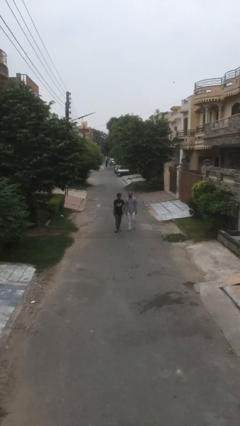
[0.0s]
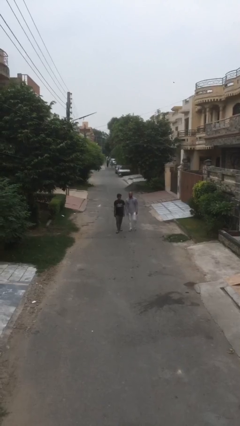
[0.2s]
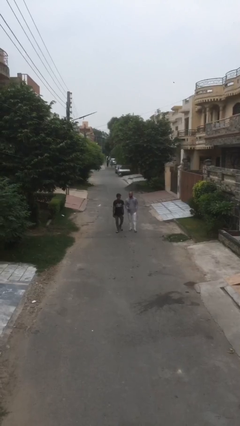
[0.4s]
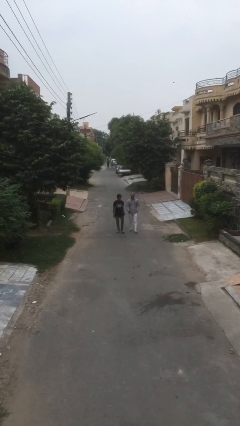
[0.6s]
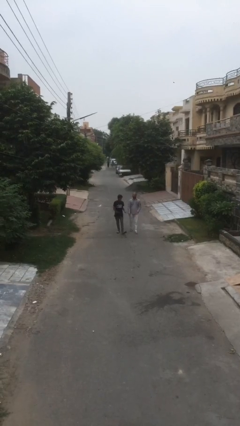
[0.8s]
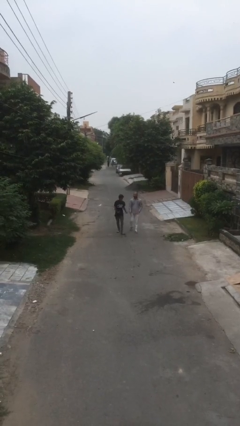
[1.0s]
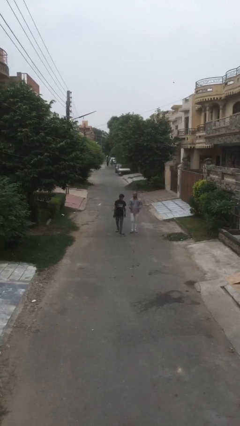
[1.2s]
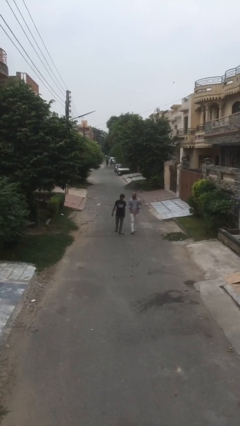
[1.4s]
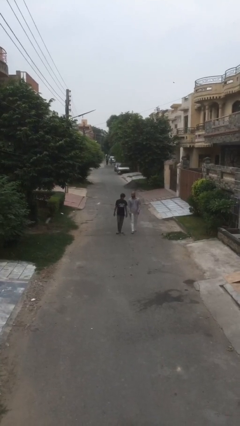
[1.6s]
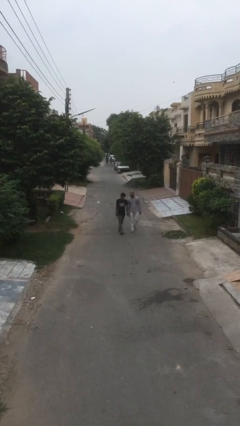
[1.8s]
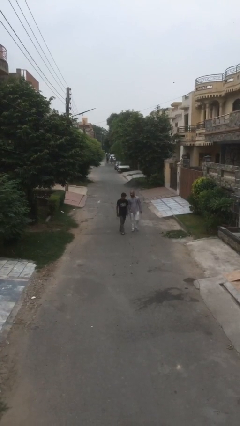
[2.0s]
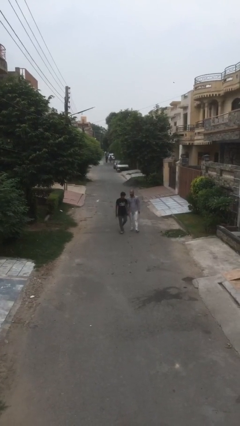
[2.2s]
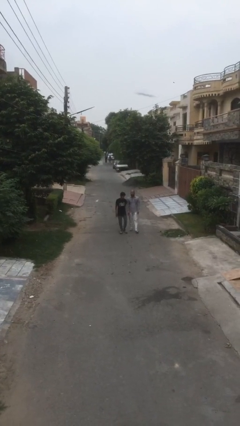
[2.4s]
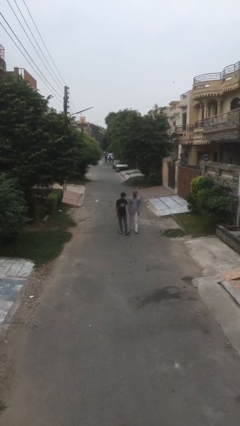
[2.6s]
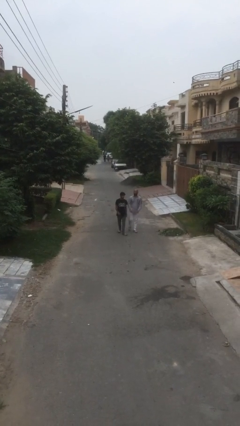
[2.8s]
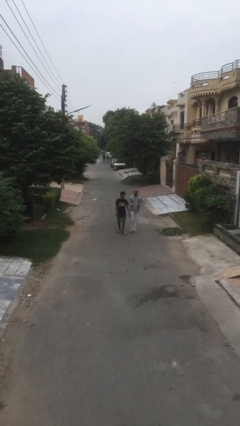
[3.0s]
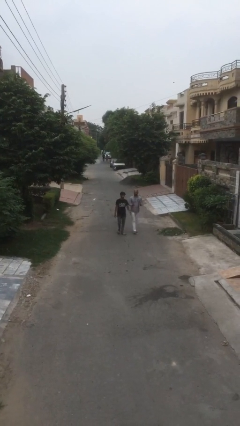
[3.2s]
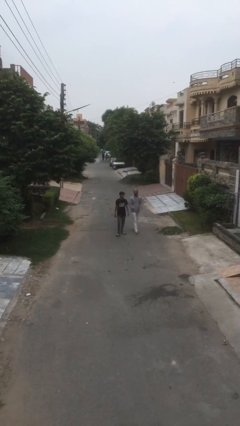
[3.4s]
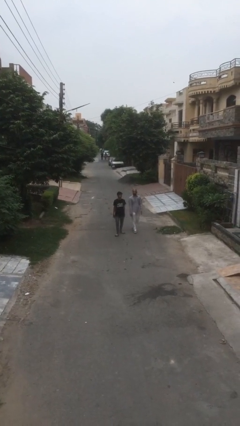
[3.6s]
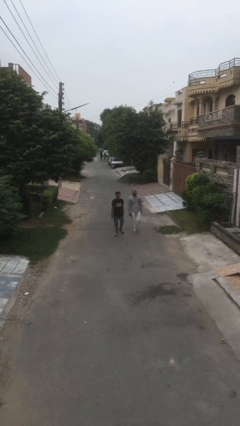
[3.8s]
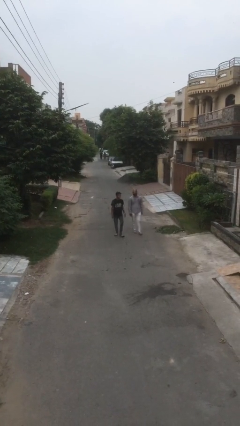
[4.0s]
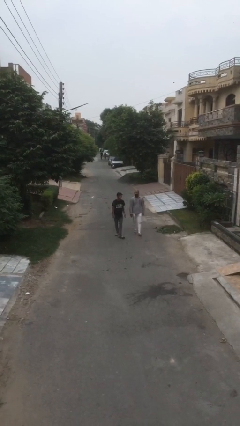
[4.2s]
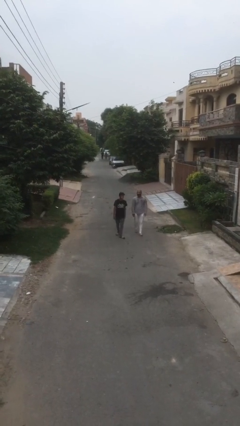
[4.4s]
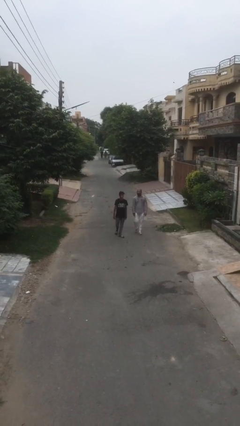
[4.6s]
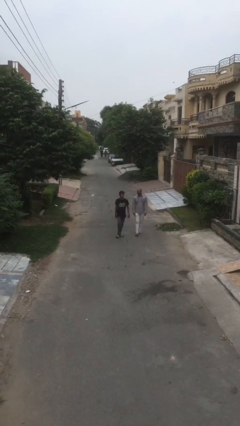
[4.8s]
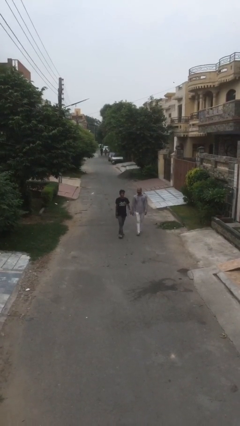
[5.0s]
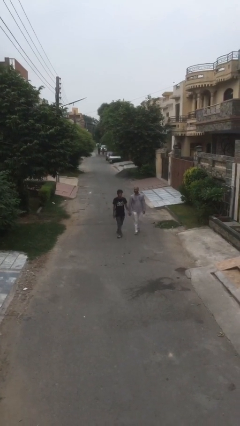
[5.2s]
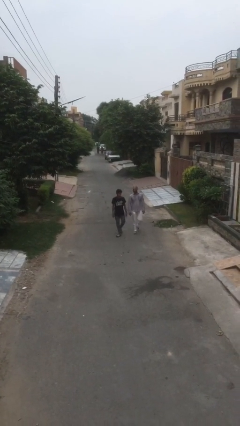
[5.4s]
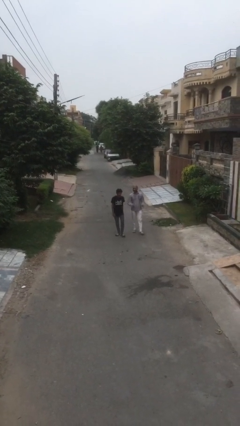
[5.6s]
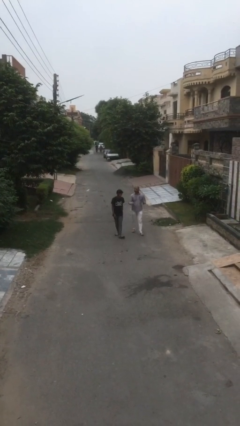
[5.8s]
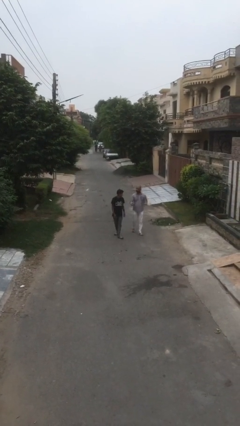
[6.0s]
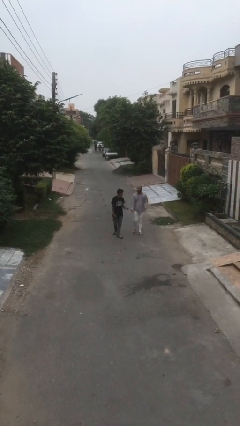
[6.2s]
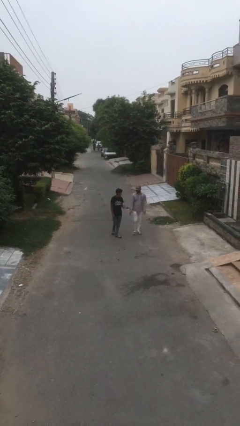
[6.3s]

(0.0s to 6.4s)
person talks to person

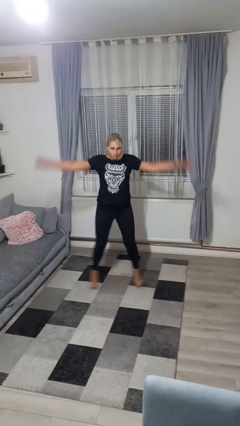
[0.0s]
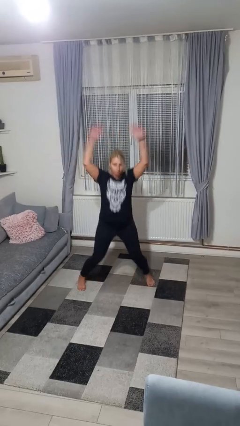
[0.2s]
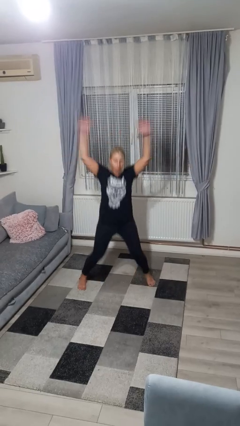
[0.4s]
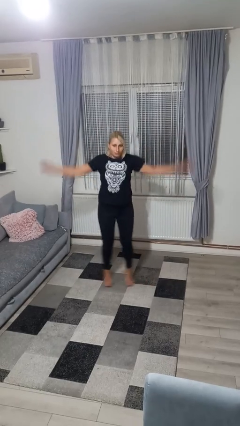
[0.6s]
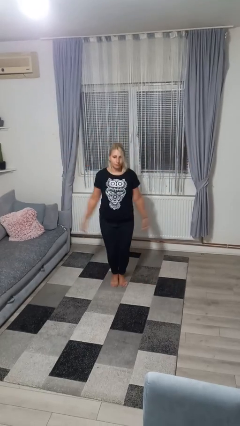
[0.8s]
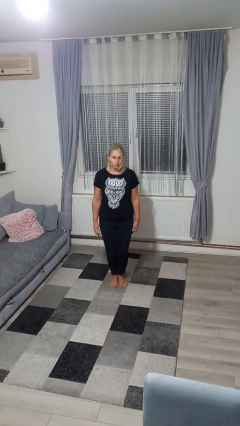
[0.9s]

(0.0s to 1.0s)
person exercises with jumping jacks

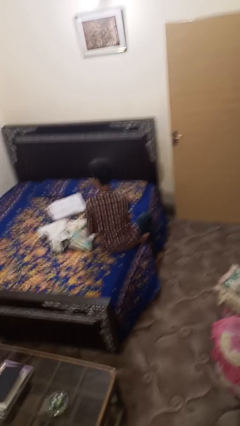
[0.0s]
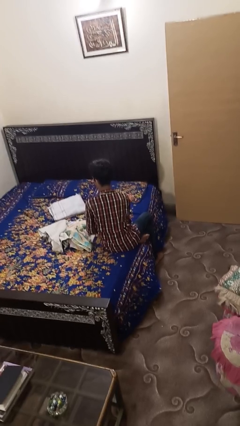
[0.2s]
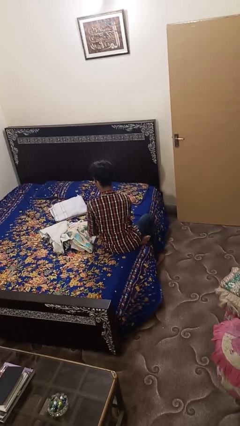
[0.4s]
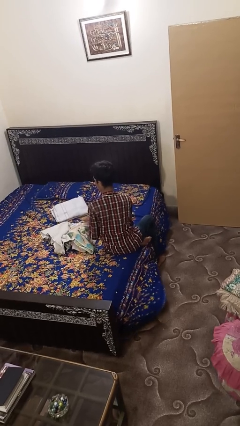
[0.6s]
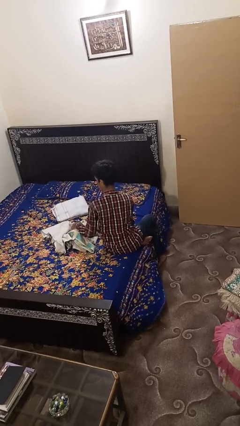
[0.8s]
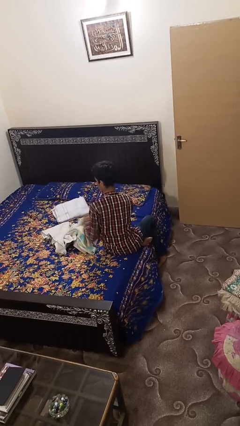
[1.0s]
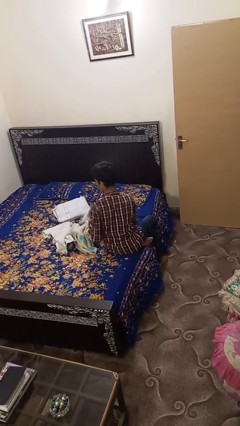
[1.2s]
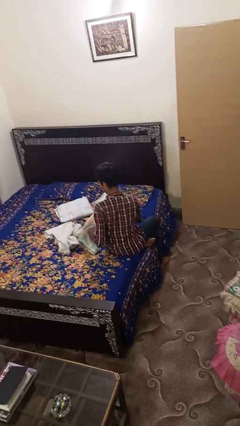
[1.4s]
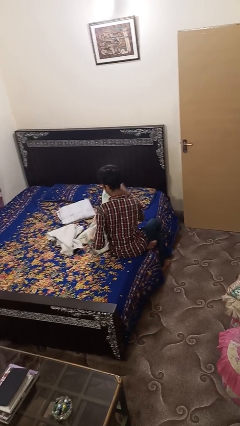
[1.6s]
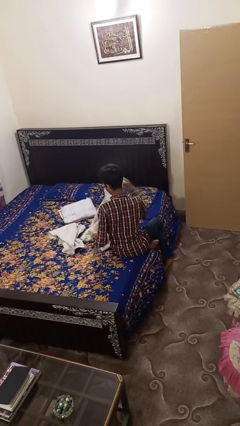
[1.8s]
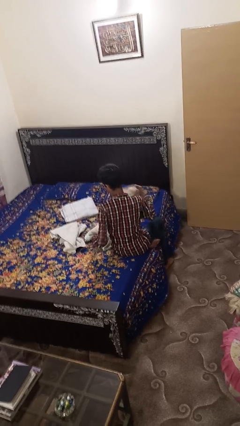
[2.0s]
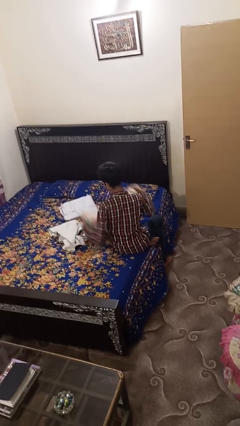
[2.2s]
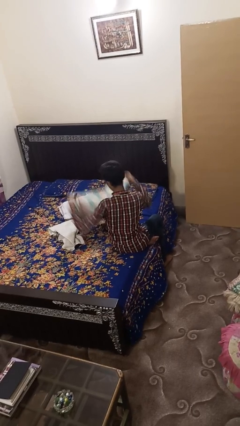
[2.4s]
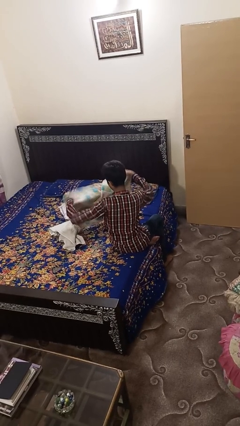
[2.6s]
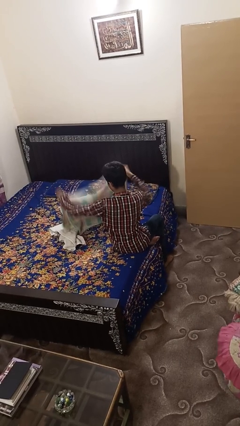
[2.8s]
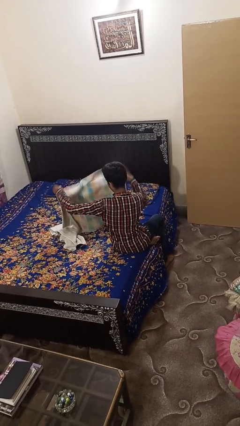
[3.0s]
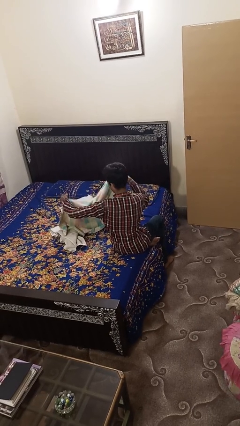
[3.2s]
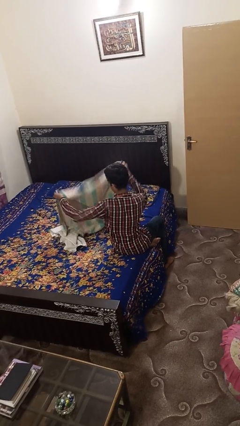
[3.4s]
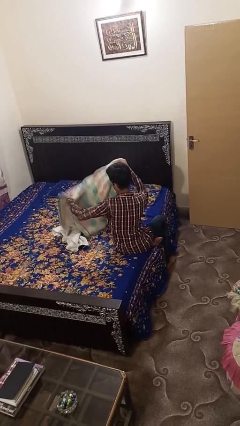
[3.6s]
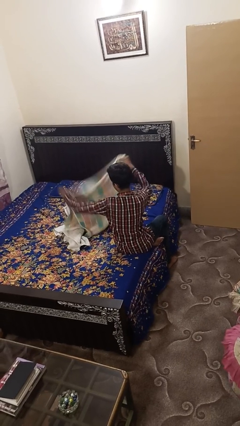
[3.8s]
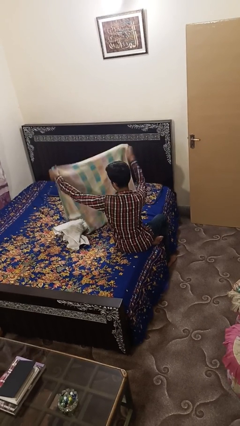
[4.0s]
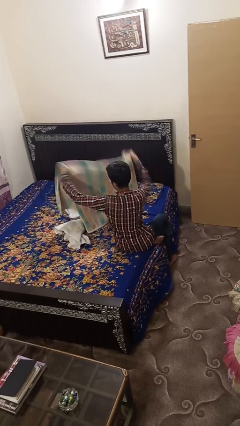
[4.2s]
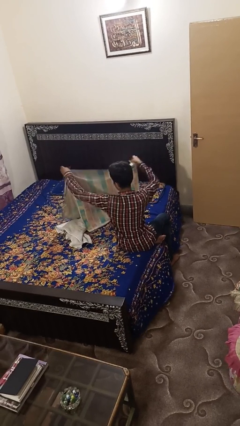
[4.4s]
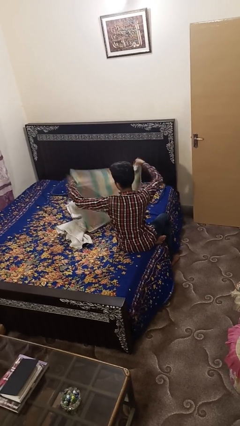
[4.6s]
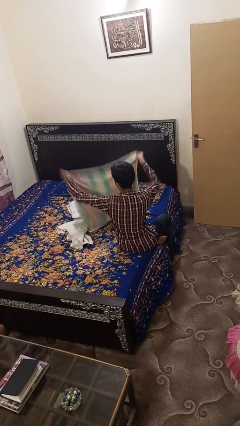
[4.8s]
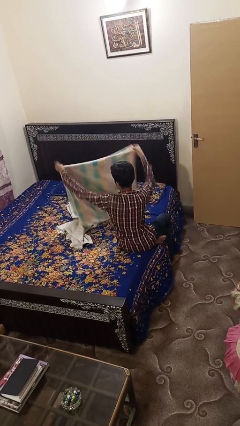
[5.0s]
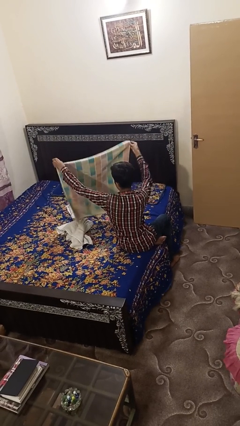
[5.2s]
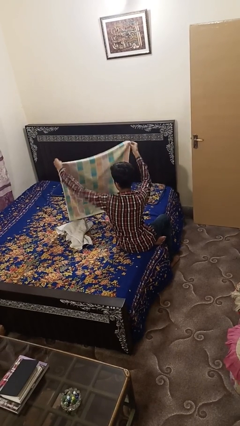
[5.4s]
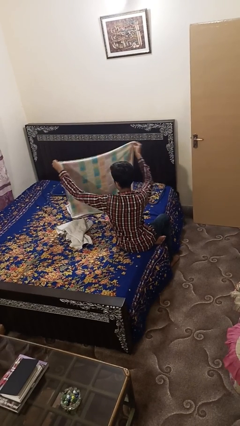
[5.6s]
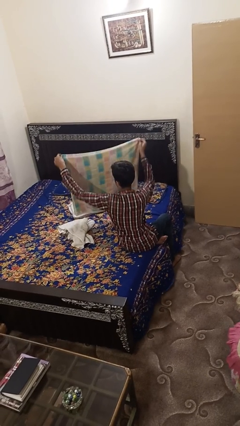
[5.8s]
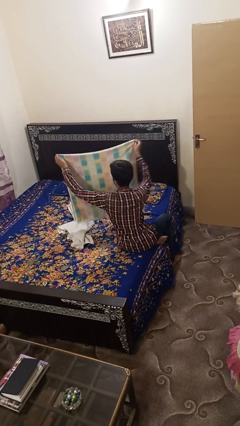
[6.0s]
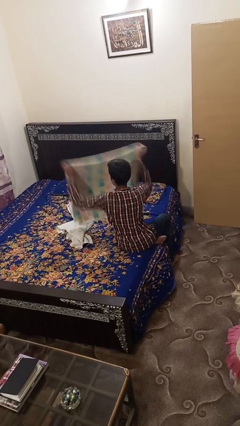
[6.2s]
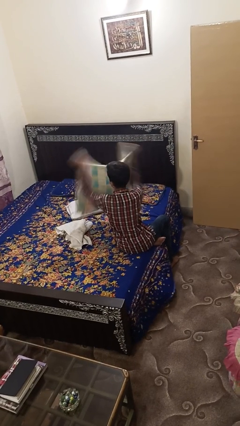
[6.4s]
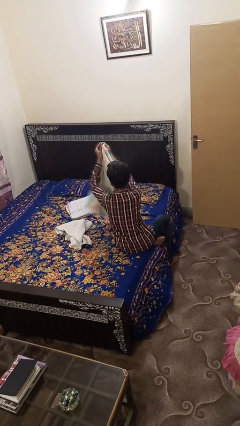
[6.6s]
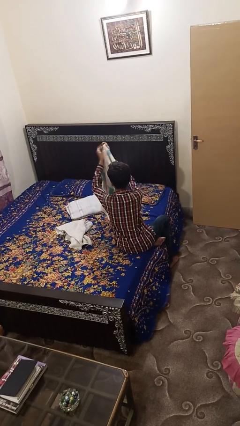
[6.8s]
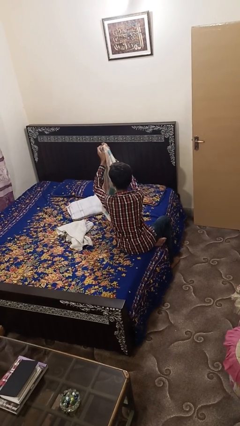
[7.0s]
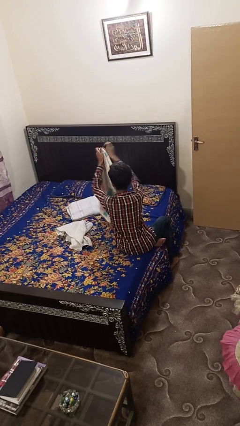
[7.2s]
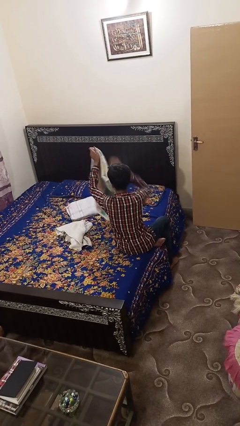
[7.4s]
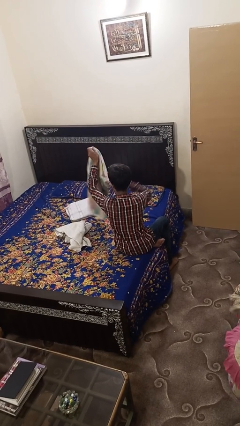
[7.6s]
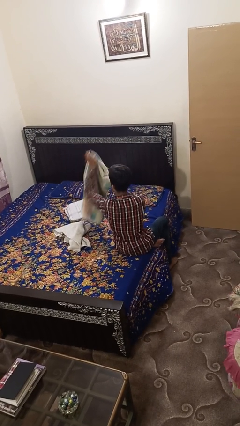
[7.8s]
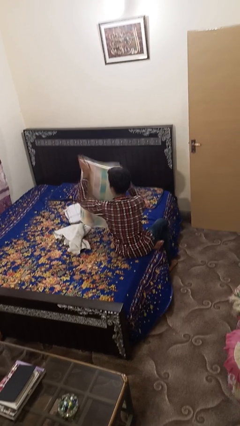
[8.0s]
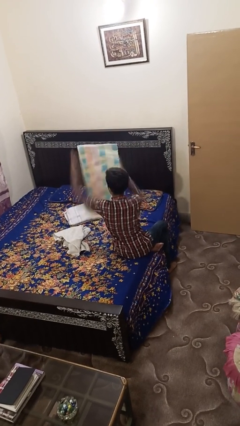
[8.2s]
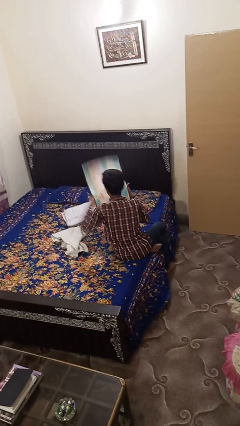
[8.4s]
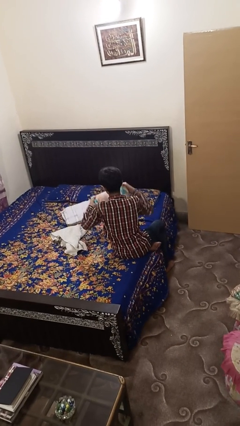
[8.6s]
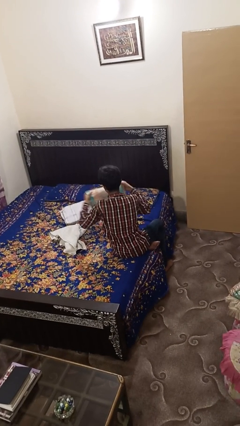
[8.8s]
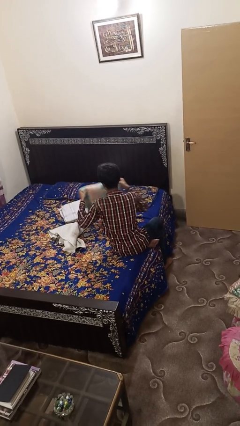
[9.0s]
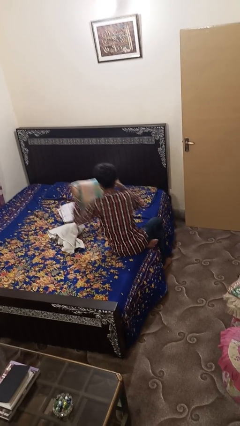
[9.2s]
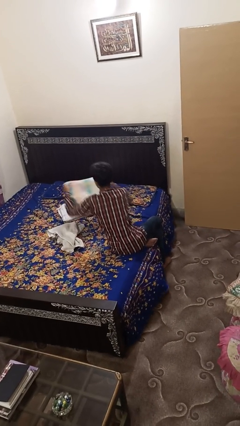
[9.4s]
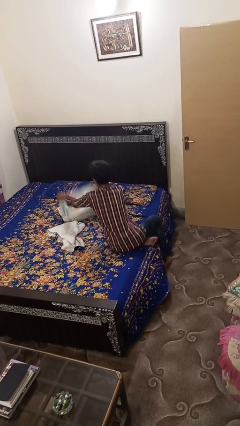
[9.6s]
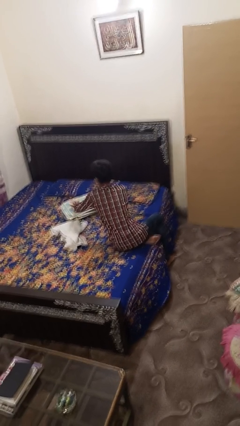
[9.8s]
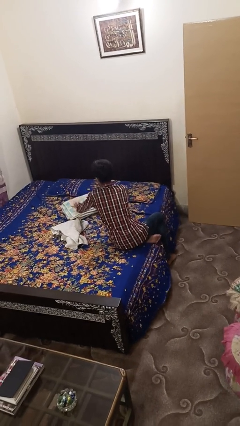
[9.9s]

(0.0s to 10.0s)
person folds towel

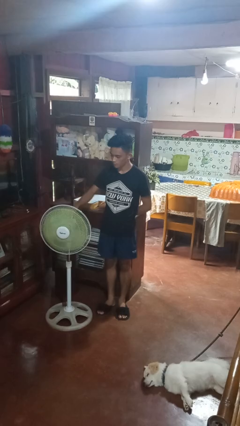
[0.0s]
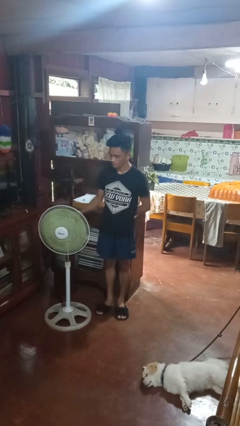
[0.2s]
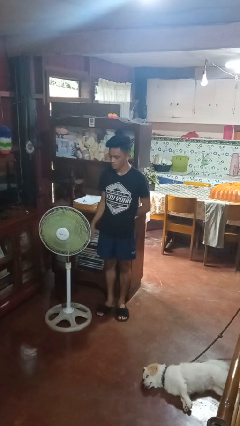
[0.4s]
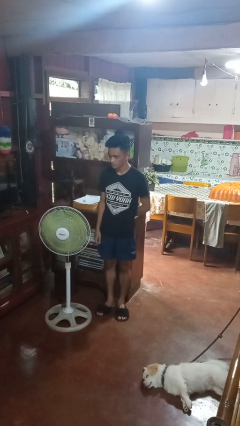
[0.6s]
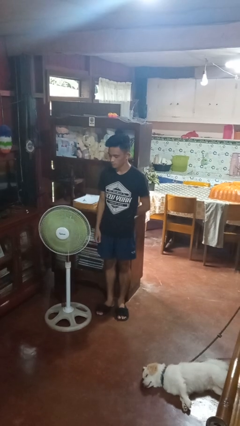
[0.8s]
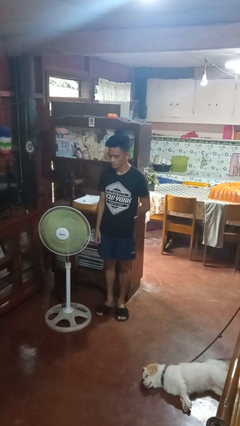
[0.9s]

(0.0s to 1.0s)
person turns off fan
